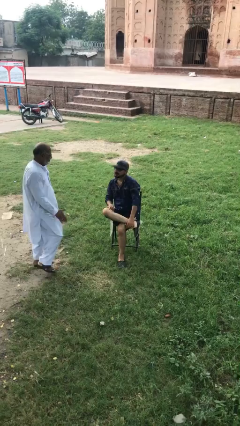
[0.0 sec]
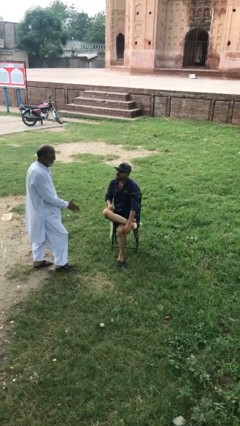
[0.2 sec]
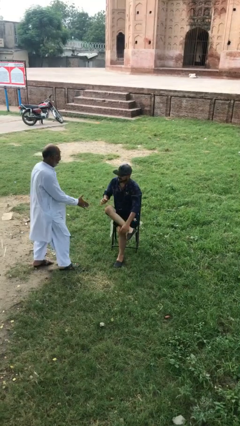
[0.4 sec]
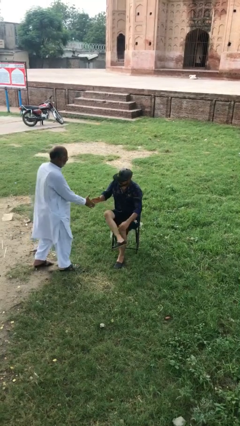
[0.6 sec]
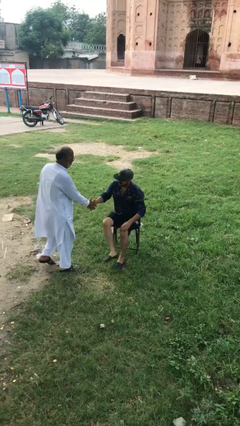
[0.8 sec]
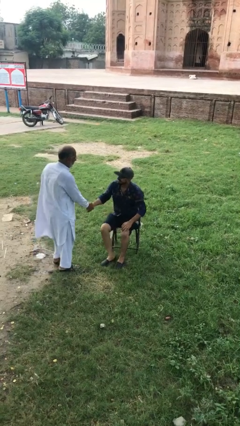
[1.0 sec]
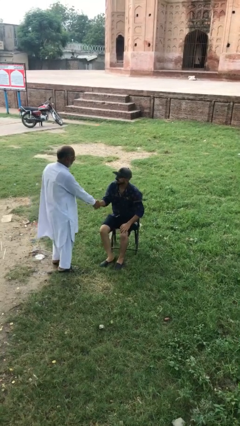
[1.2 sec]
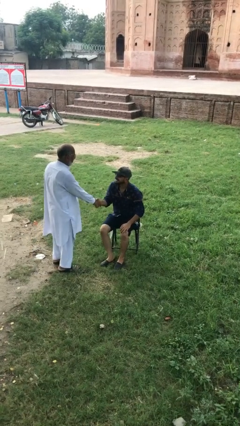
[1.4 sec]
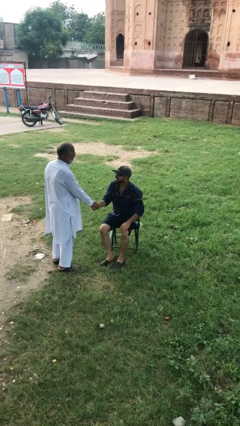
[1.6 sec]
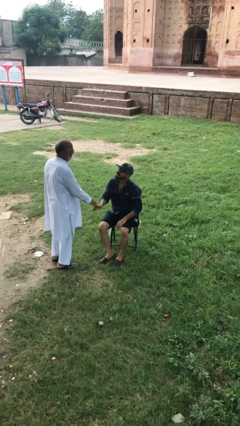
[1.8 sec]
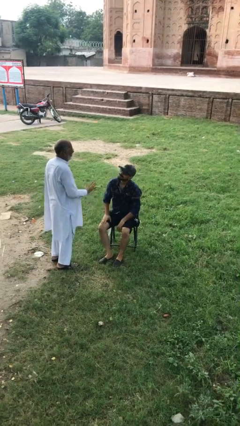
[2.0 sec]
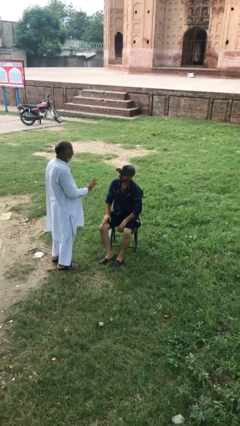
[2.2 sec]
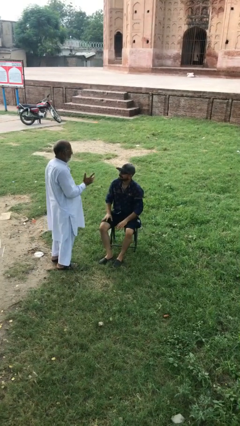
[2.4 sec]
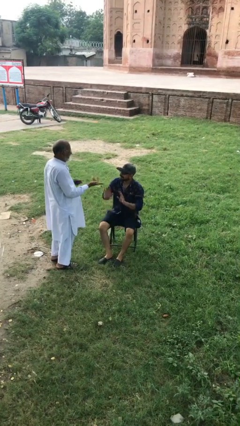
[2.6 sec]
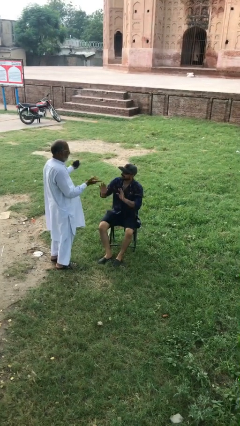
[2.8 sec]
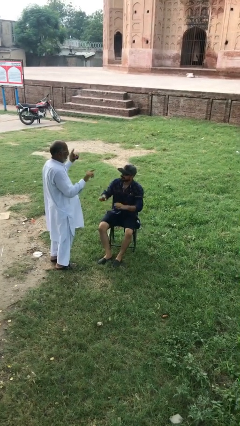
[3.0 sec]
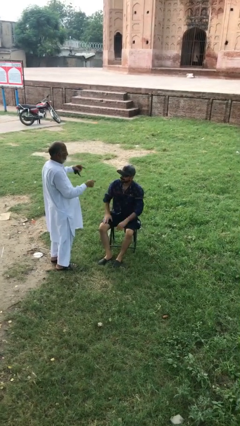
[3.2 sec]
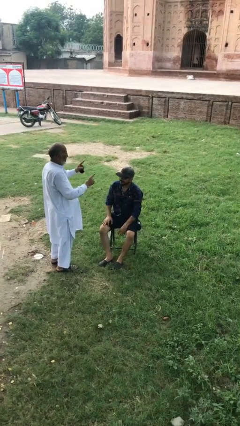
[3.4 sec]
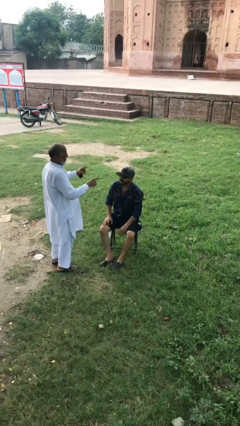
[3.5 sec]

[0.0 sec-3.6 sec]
person shakes hand

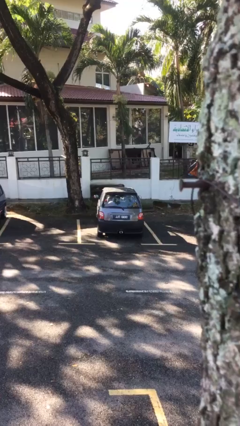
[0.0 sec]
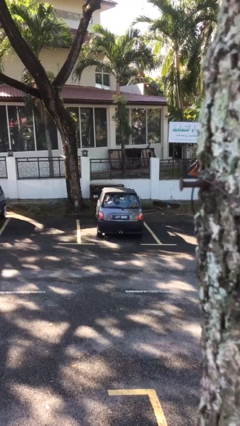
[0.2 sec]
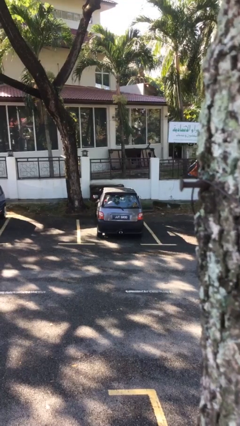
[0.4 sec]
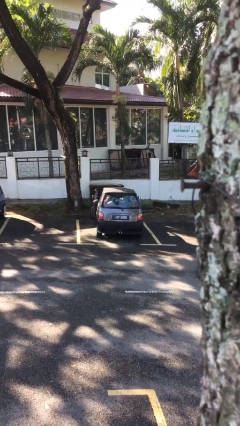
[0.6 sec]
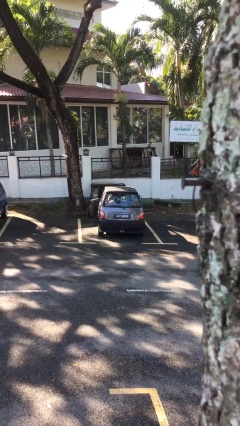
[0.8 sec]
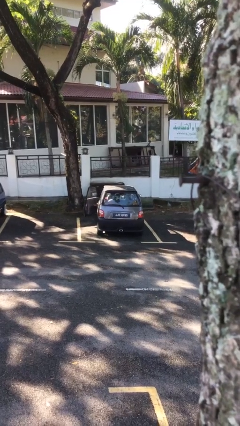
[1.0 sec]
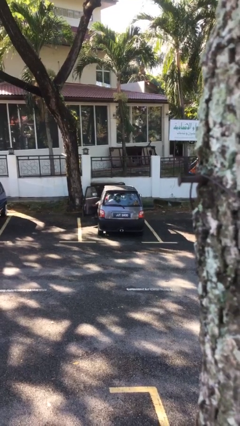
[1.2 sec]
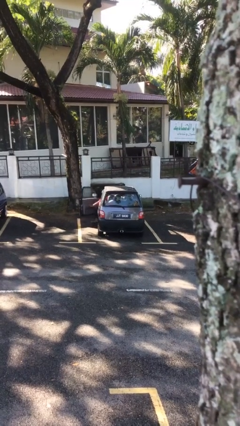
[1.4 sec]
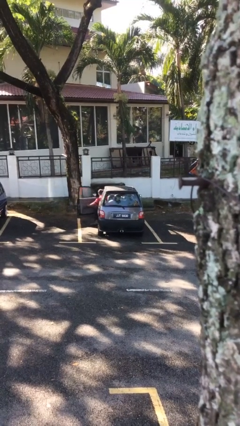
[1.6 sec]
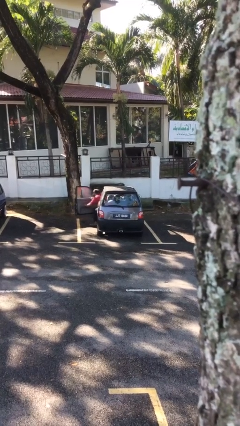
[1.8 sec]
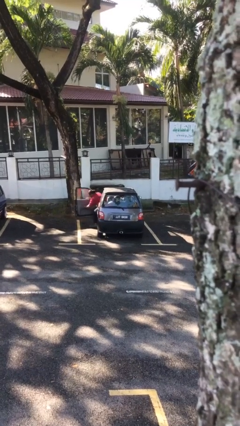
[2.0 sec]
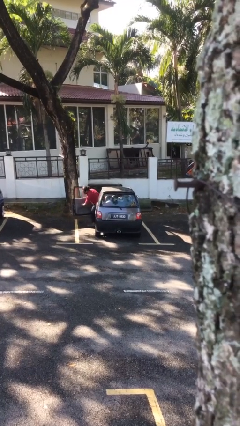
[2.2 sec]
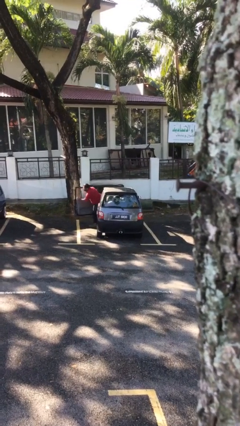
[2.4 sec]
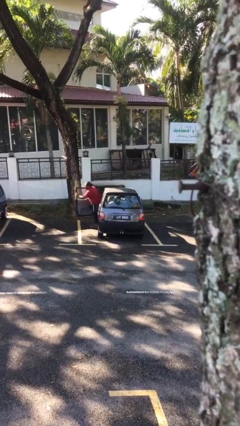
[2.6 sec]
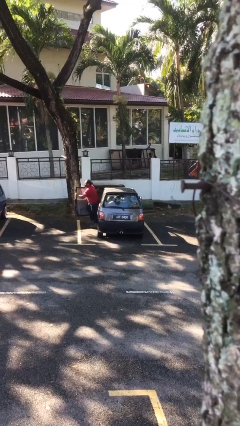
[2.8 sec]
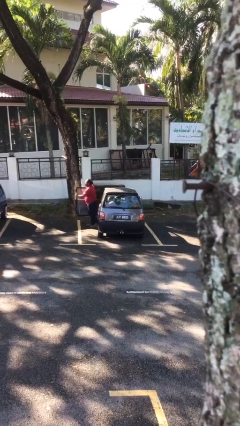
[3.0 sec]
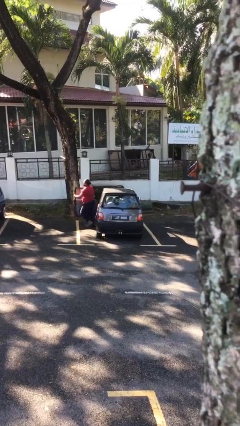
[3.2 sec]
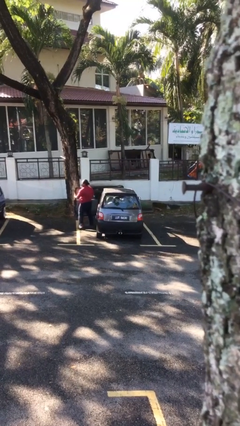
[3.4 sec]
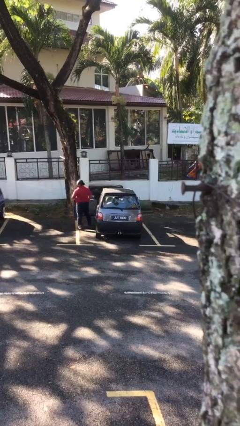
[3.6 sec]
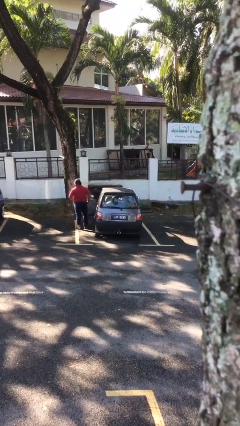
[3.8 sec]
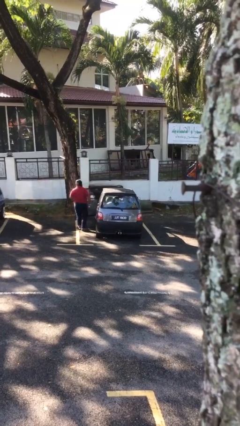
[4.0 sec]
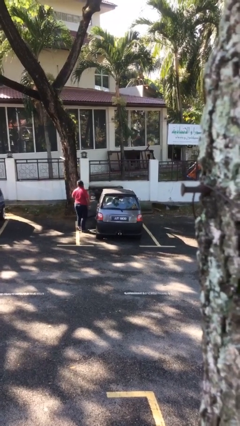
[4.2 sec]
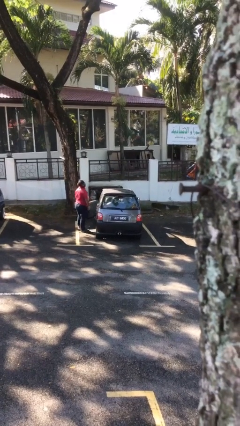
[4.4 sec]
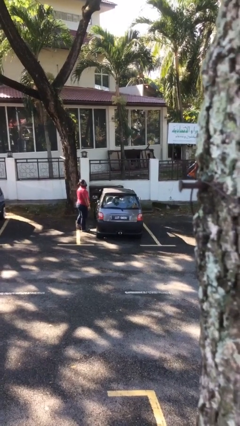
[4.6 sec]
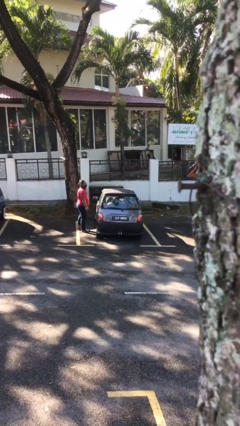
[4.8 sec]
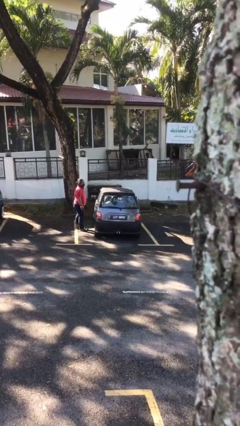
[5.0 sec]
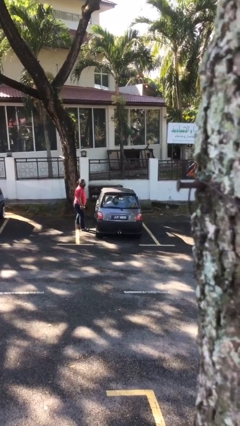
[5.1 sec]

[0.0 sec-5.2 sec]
car drops off person

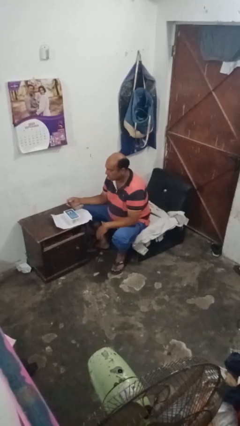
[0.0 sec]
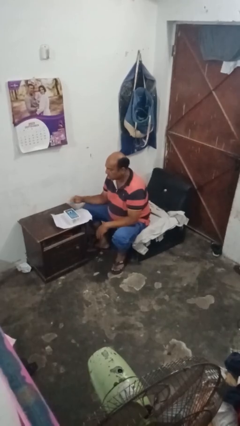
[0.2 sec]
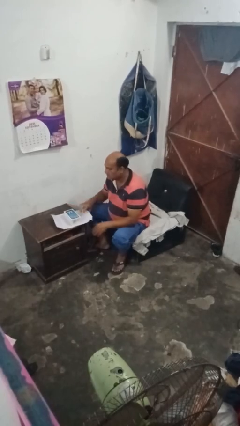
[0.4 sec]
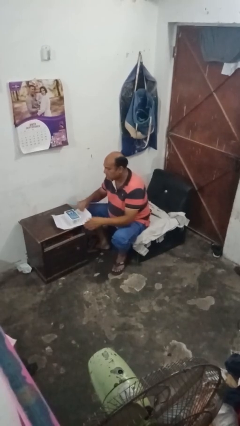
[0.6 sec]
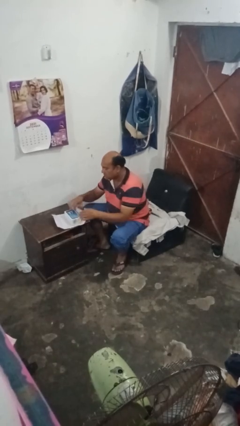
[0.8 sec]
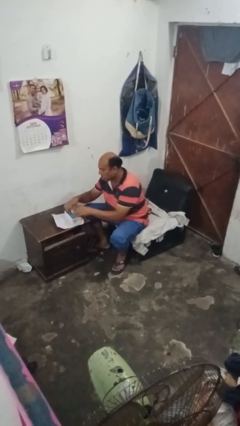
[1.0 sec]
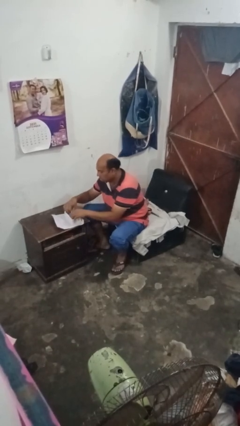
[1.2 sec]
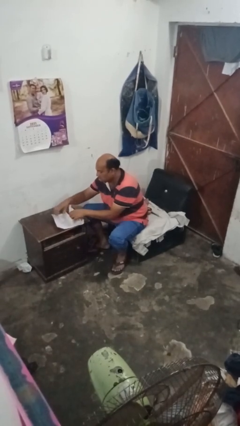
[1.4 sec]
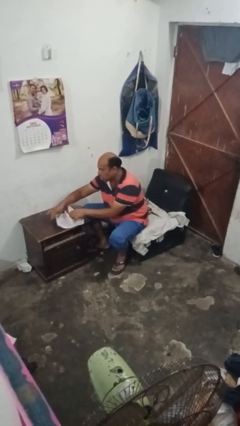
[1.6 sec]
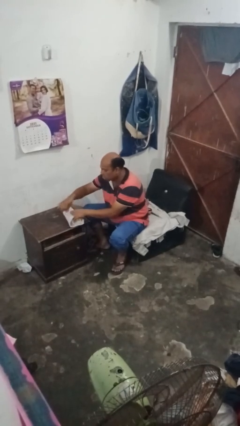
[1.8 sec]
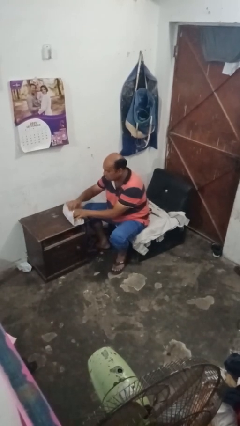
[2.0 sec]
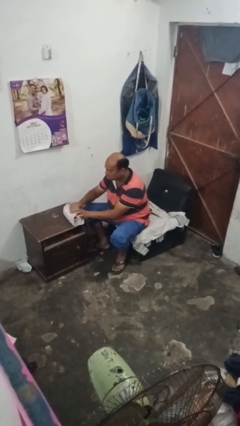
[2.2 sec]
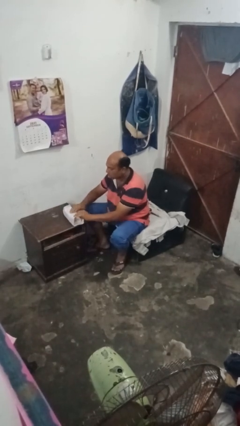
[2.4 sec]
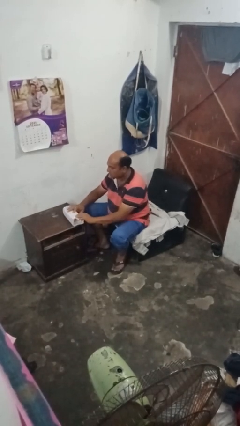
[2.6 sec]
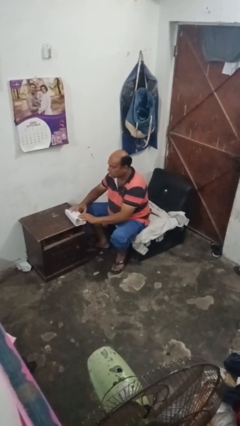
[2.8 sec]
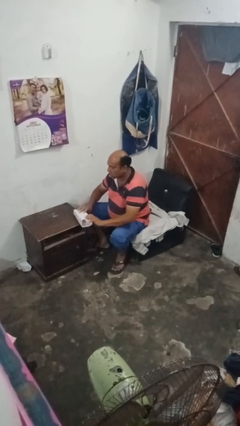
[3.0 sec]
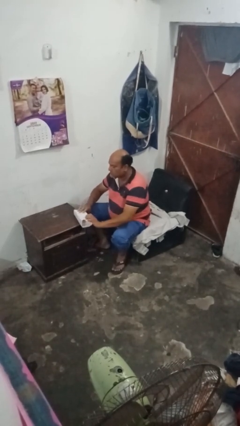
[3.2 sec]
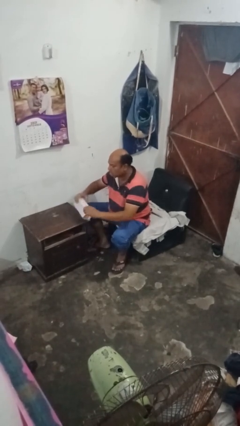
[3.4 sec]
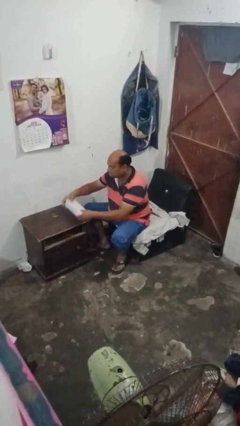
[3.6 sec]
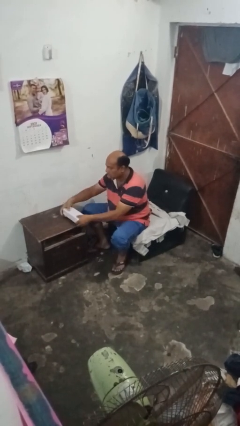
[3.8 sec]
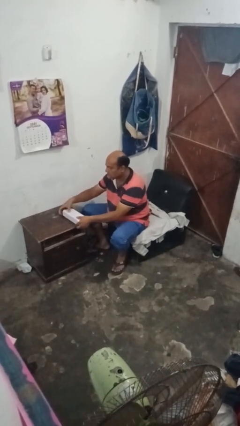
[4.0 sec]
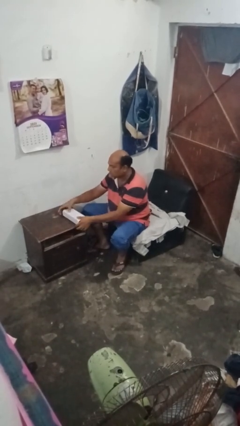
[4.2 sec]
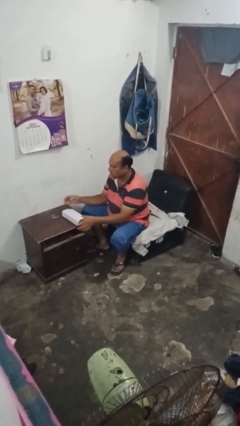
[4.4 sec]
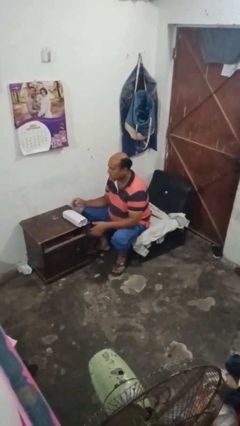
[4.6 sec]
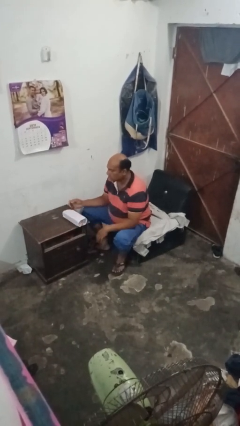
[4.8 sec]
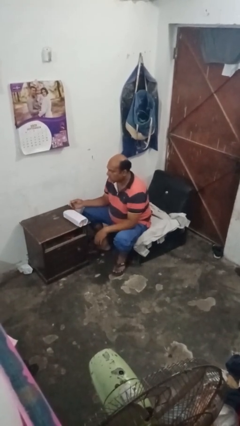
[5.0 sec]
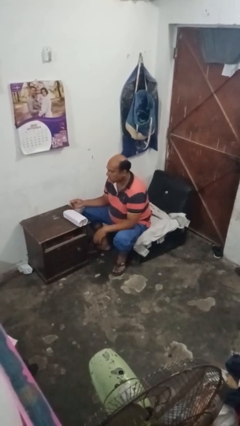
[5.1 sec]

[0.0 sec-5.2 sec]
person wraps box

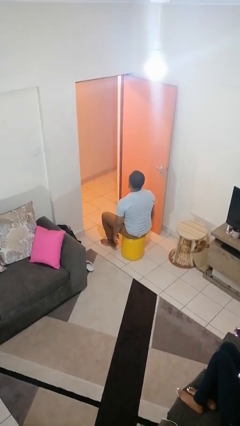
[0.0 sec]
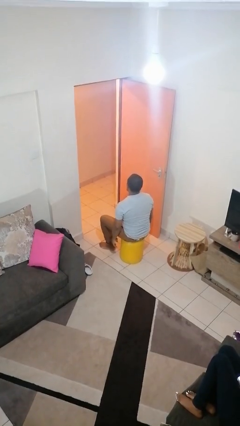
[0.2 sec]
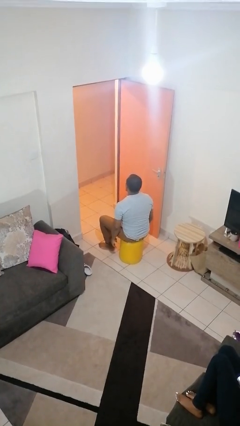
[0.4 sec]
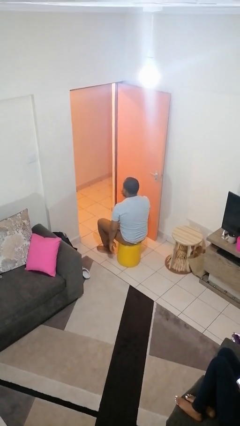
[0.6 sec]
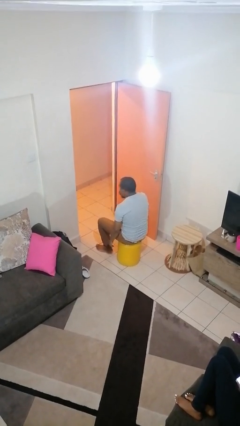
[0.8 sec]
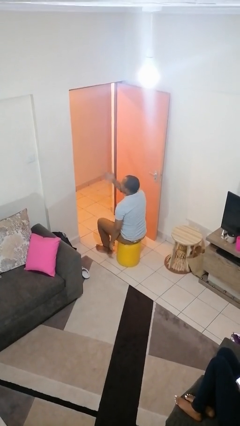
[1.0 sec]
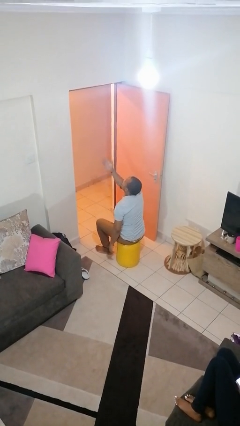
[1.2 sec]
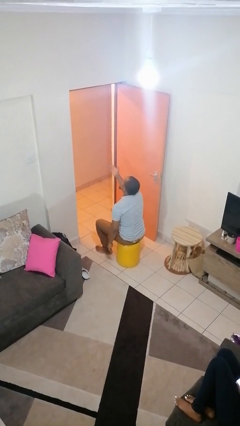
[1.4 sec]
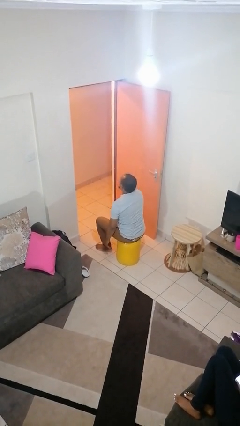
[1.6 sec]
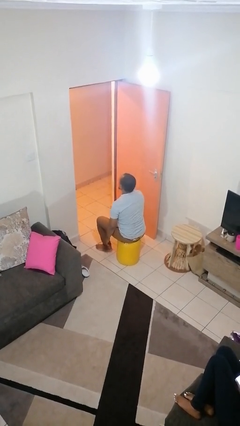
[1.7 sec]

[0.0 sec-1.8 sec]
person gestures blow kiss

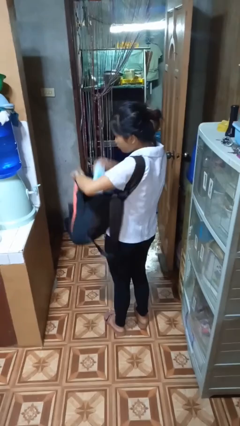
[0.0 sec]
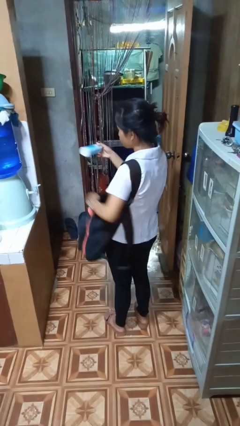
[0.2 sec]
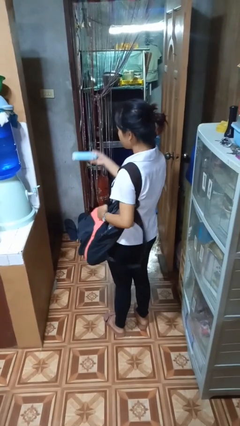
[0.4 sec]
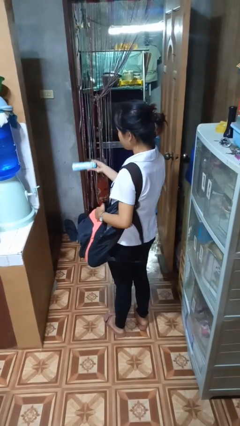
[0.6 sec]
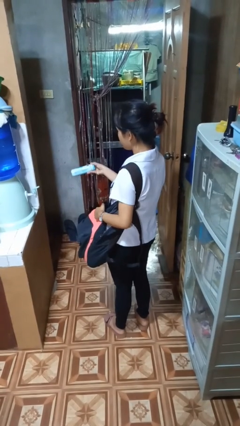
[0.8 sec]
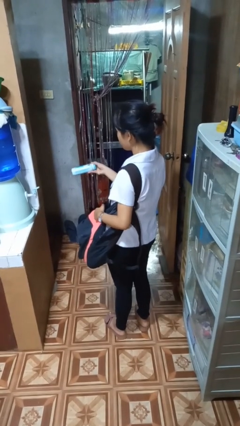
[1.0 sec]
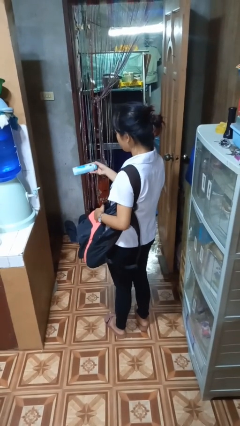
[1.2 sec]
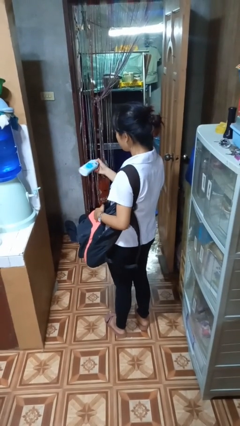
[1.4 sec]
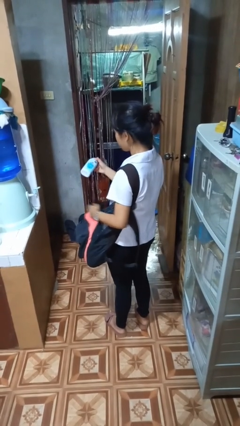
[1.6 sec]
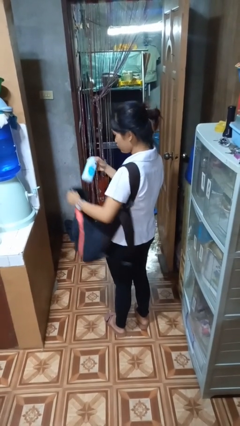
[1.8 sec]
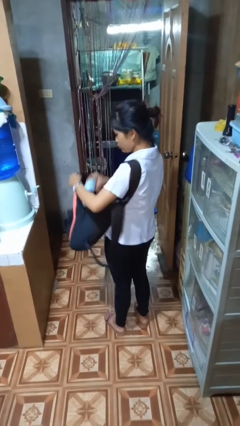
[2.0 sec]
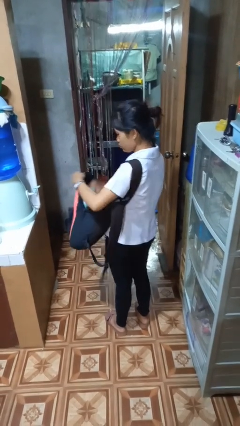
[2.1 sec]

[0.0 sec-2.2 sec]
person takes object from backpack
